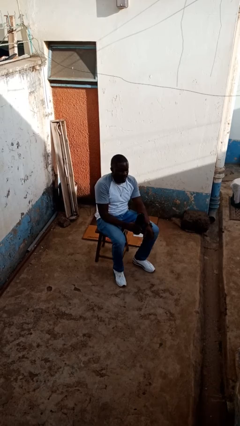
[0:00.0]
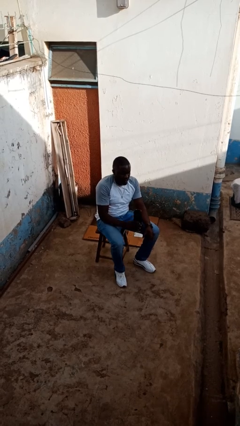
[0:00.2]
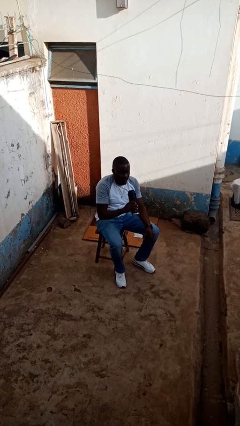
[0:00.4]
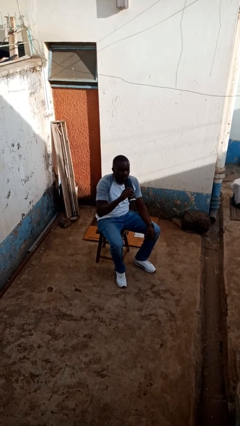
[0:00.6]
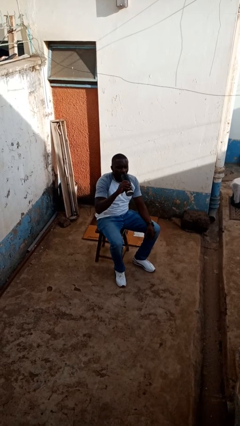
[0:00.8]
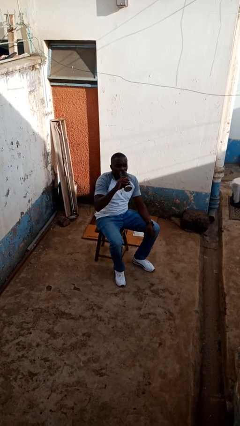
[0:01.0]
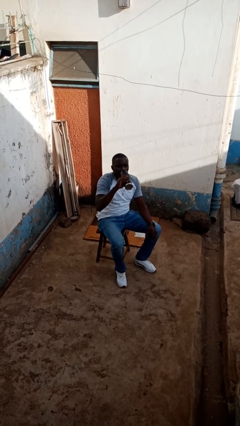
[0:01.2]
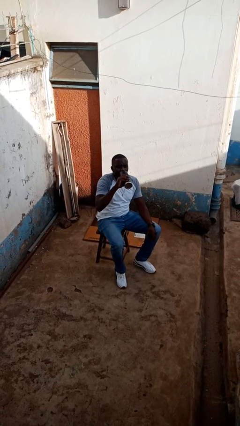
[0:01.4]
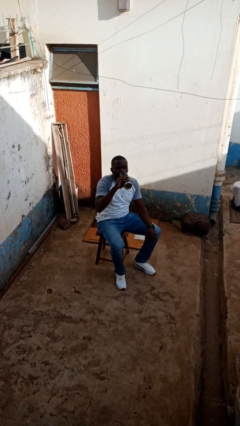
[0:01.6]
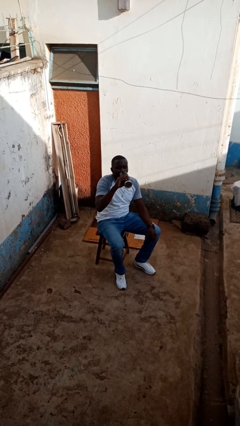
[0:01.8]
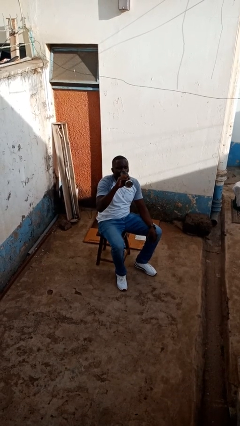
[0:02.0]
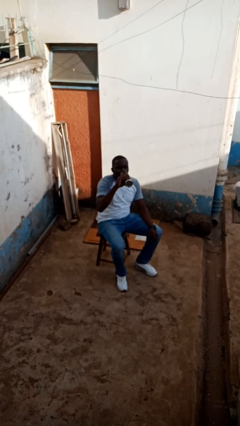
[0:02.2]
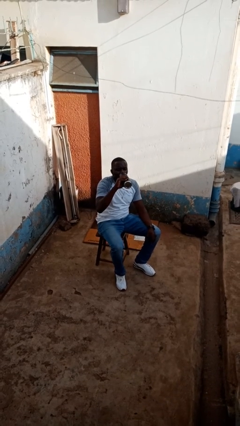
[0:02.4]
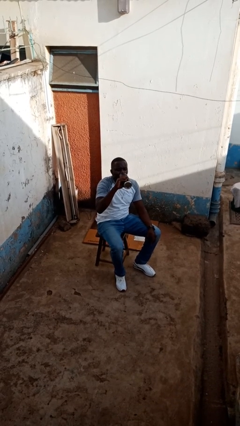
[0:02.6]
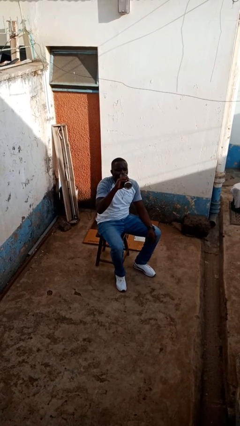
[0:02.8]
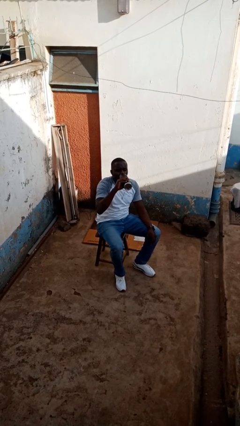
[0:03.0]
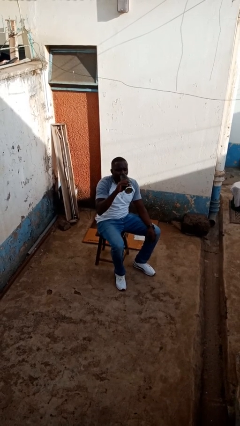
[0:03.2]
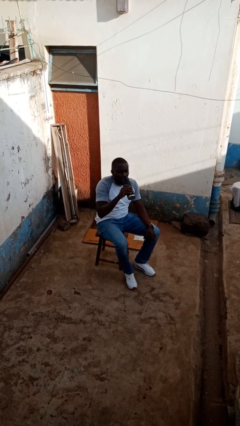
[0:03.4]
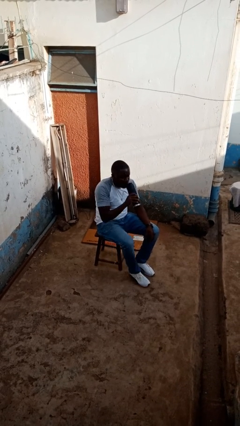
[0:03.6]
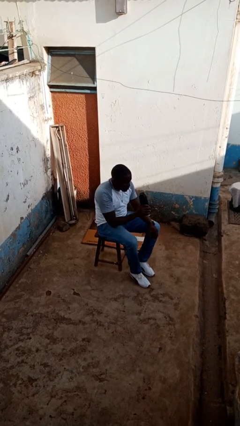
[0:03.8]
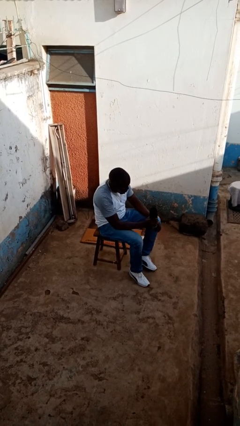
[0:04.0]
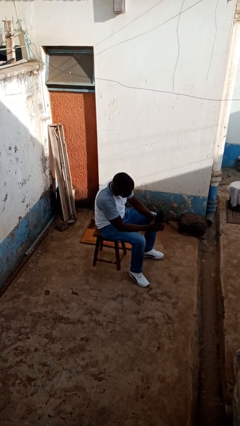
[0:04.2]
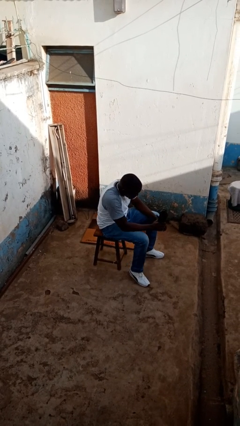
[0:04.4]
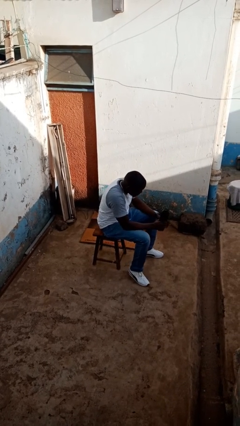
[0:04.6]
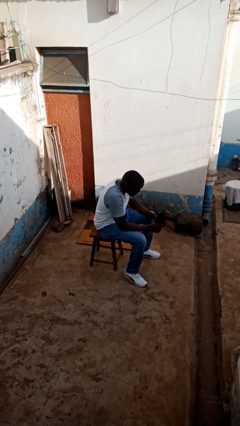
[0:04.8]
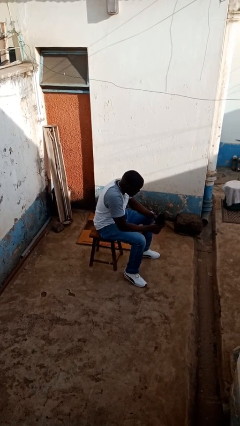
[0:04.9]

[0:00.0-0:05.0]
person drinks from bottle

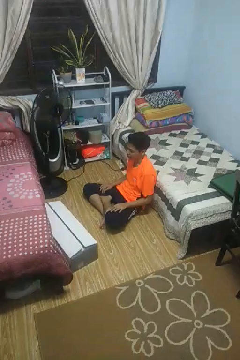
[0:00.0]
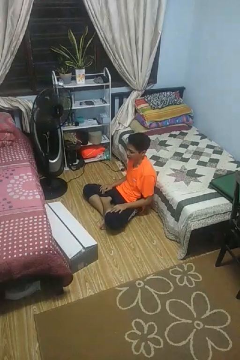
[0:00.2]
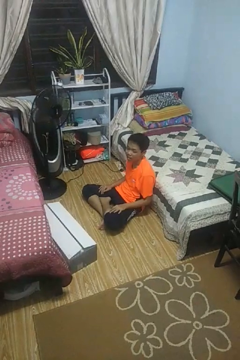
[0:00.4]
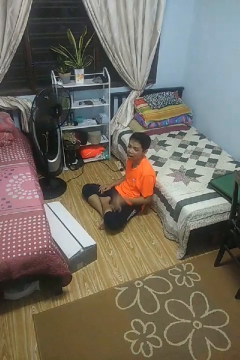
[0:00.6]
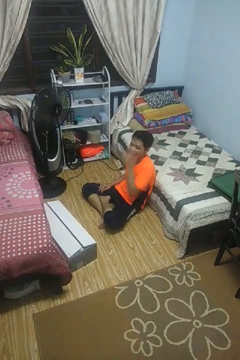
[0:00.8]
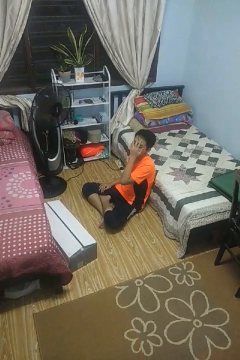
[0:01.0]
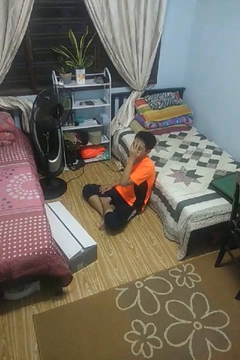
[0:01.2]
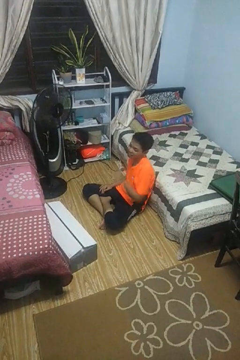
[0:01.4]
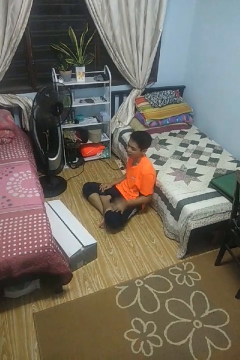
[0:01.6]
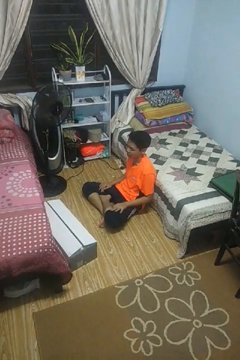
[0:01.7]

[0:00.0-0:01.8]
person covers face with hands

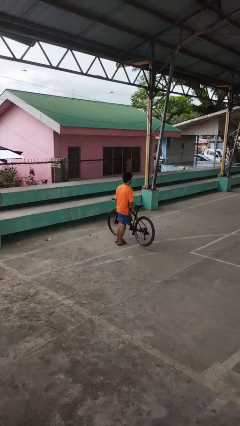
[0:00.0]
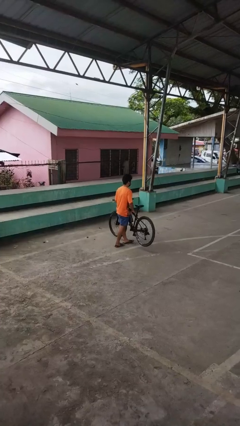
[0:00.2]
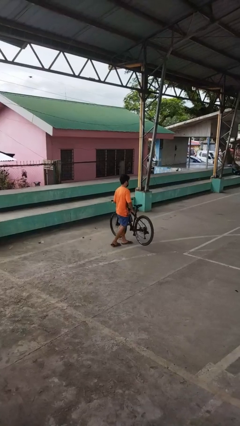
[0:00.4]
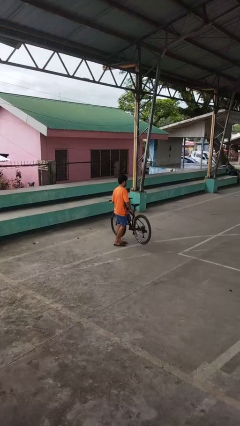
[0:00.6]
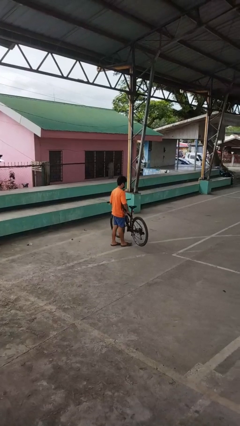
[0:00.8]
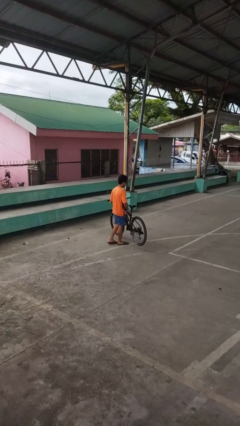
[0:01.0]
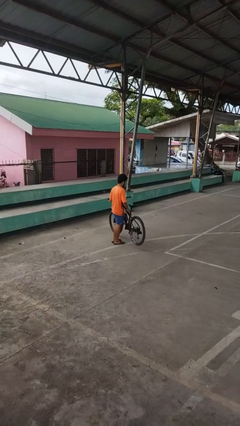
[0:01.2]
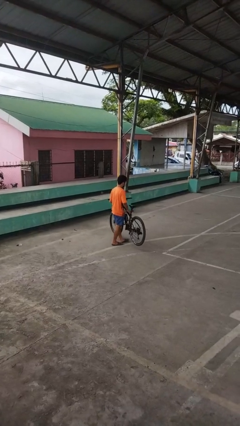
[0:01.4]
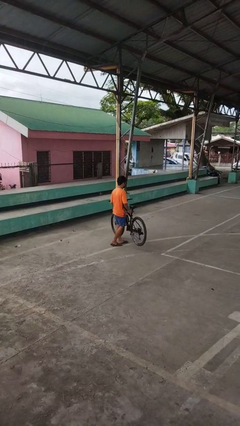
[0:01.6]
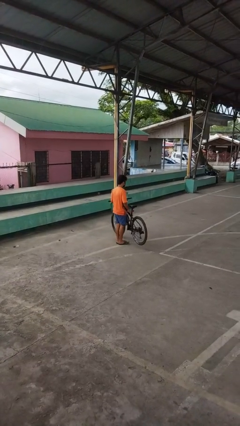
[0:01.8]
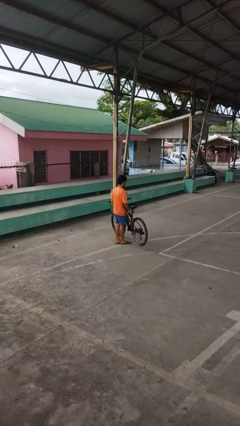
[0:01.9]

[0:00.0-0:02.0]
person carries bicycle

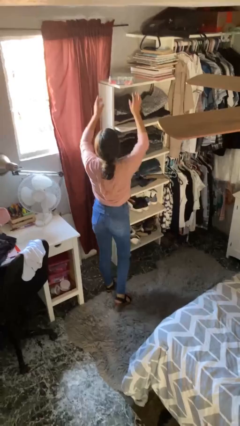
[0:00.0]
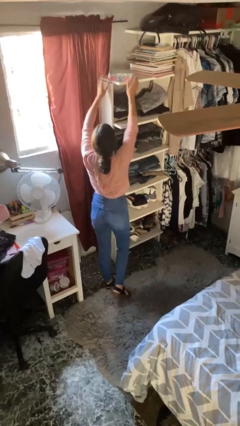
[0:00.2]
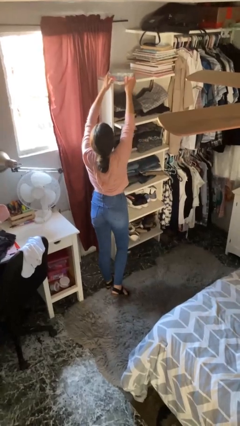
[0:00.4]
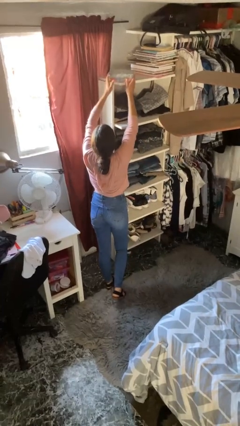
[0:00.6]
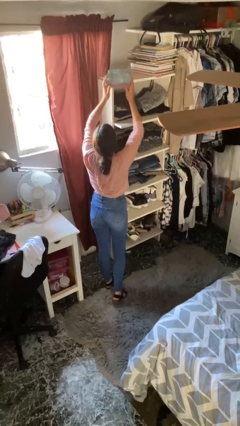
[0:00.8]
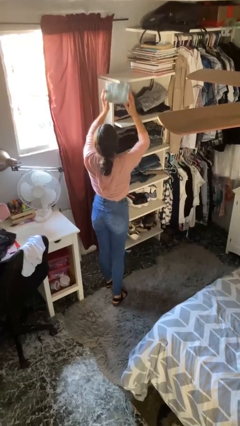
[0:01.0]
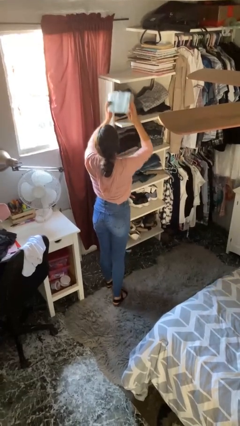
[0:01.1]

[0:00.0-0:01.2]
person picks up object from shelf

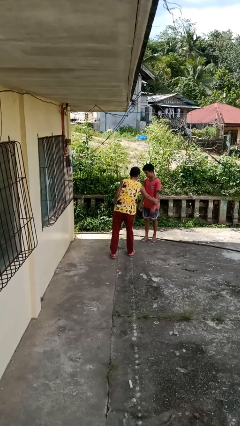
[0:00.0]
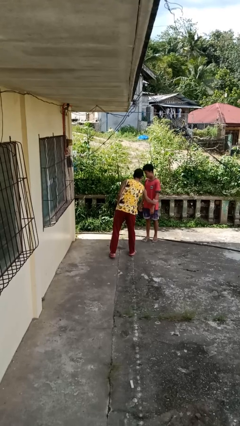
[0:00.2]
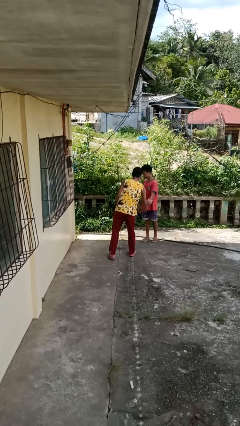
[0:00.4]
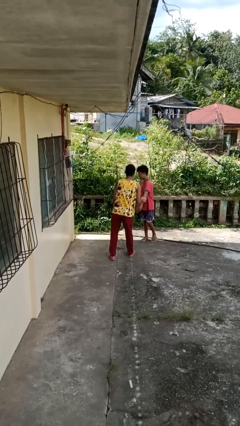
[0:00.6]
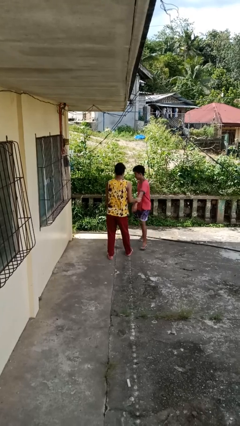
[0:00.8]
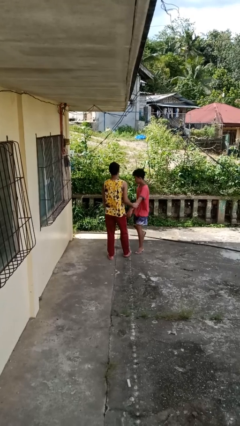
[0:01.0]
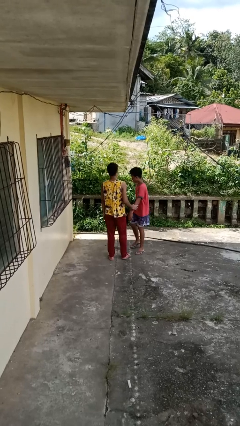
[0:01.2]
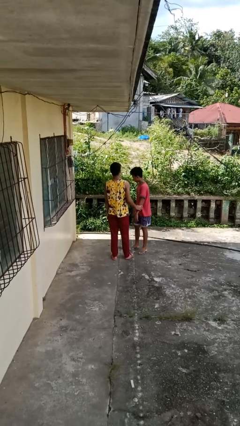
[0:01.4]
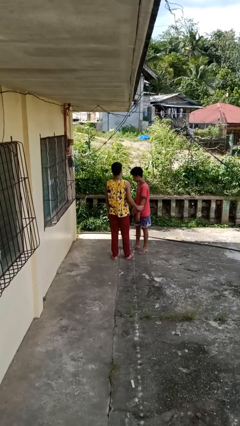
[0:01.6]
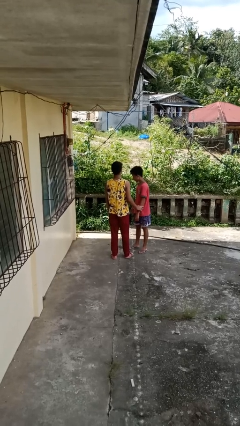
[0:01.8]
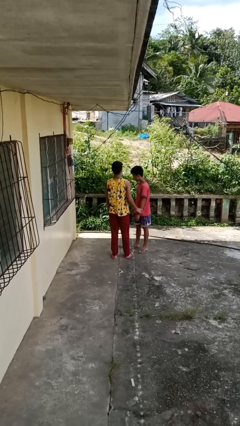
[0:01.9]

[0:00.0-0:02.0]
person grabs person by forearm

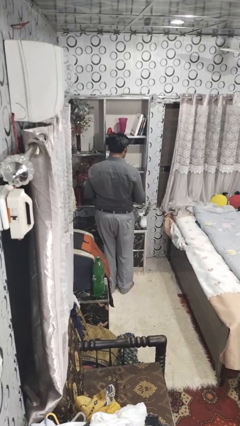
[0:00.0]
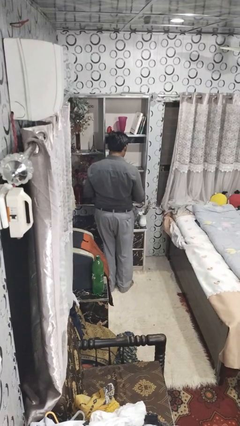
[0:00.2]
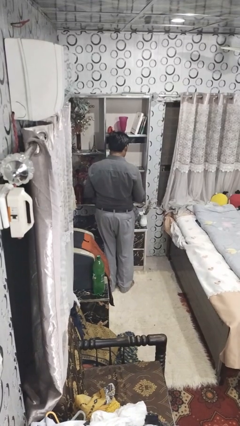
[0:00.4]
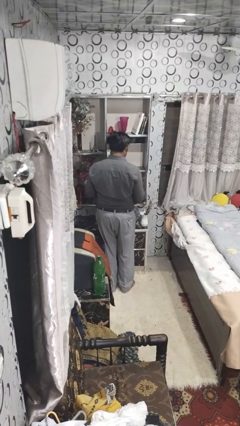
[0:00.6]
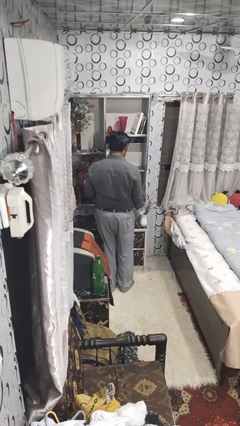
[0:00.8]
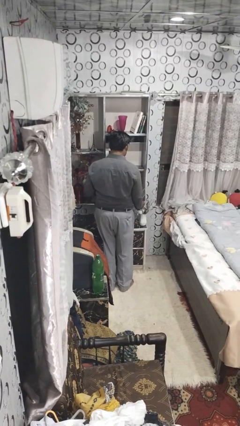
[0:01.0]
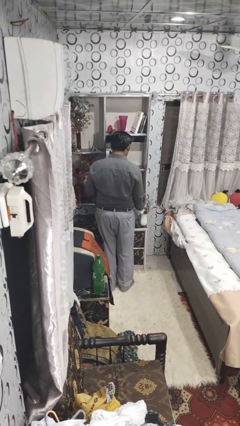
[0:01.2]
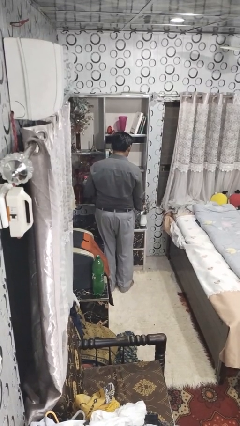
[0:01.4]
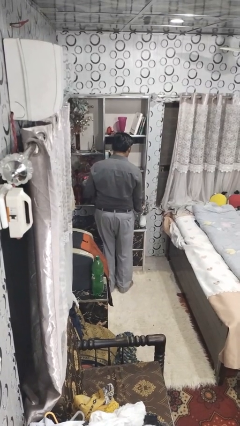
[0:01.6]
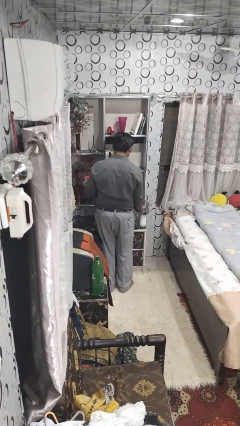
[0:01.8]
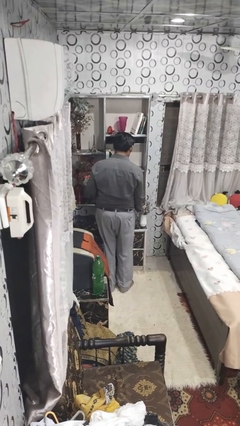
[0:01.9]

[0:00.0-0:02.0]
person arranges flowers in vase

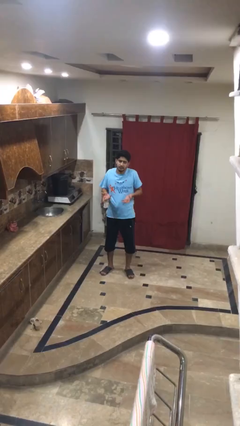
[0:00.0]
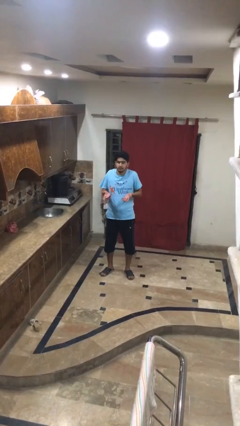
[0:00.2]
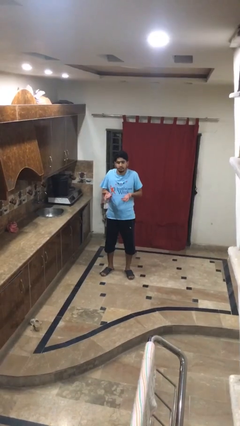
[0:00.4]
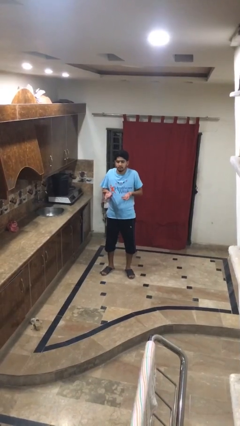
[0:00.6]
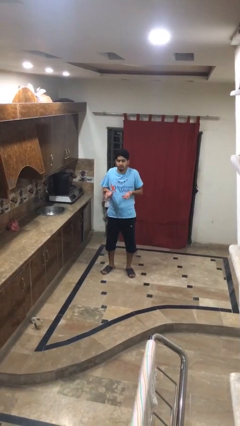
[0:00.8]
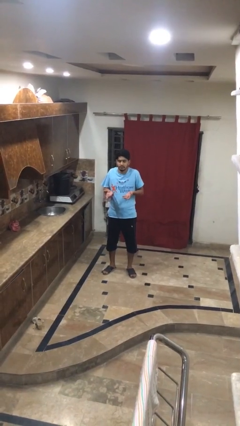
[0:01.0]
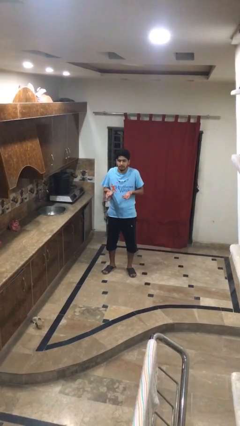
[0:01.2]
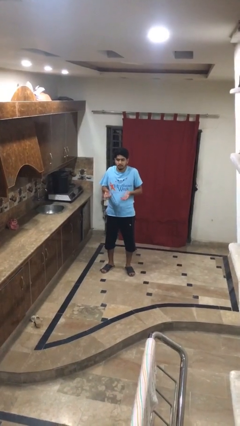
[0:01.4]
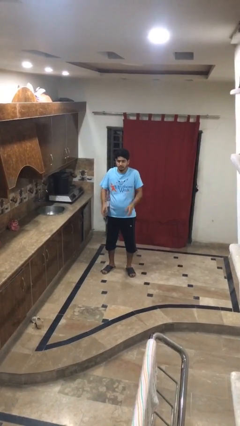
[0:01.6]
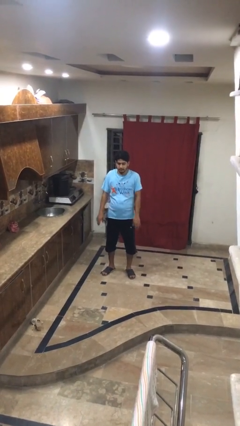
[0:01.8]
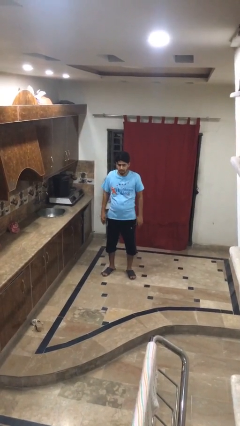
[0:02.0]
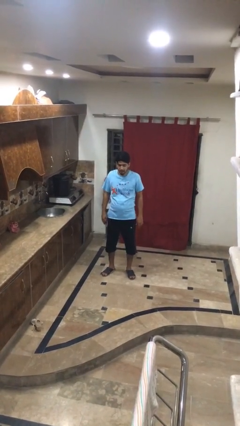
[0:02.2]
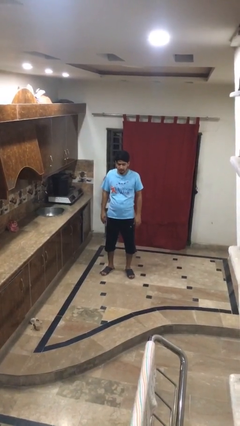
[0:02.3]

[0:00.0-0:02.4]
person shrugs

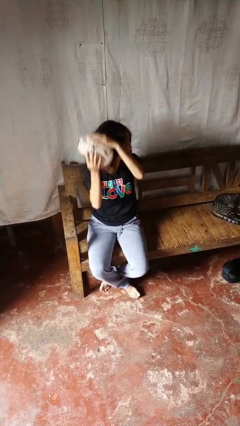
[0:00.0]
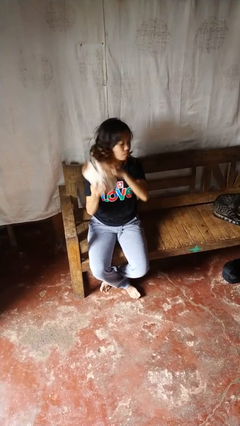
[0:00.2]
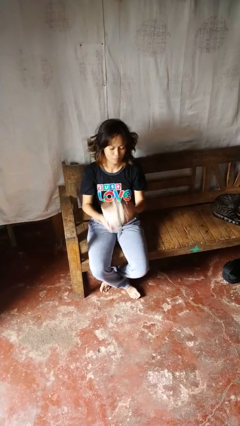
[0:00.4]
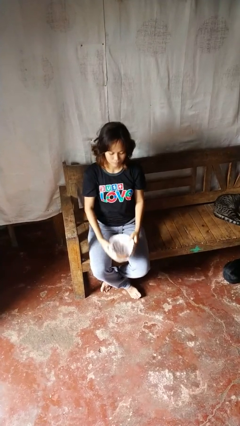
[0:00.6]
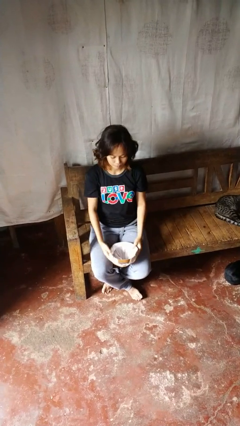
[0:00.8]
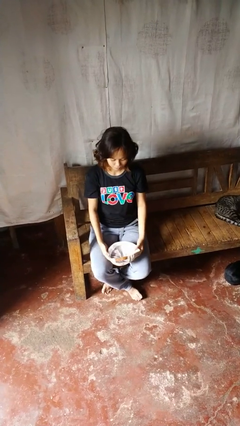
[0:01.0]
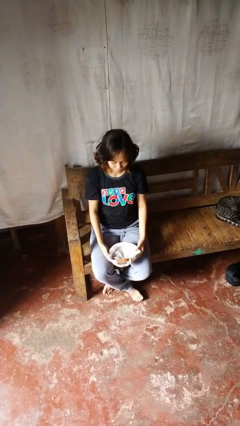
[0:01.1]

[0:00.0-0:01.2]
person takes off hat
